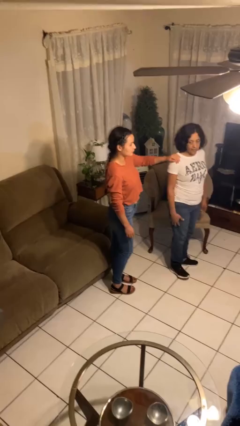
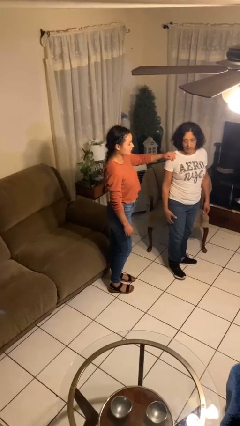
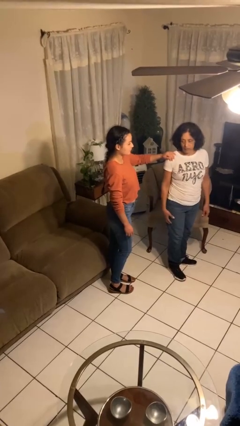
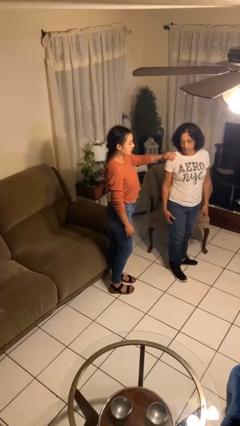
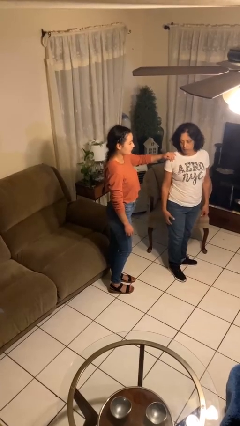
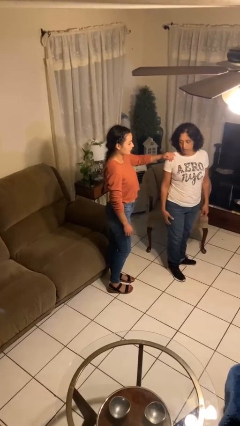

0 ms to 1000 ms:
person spins person around

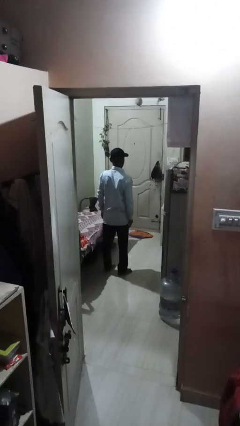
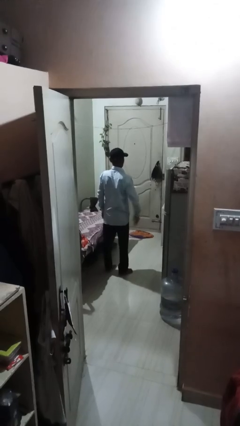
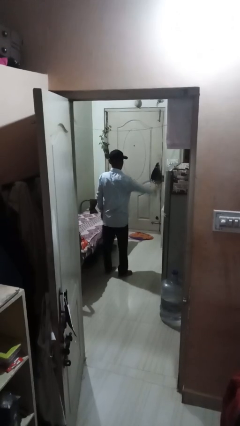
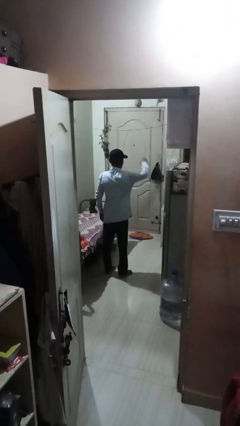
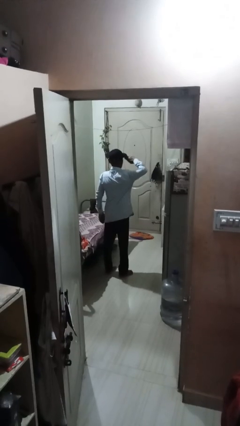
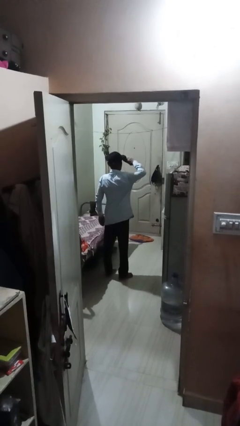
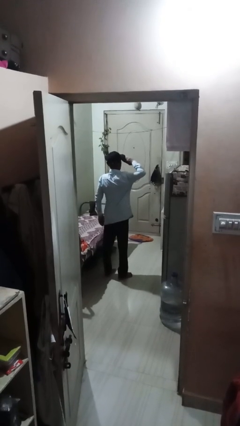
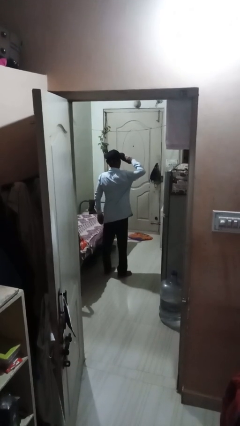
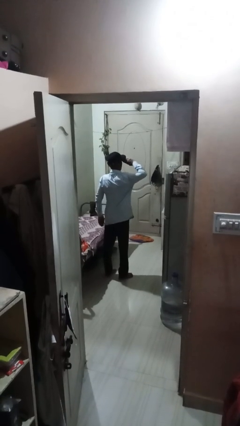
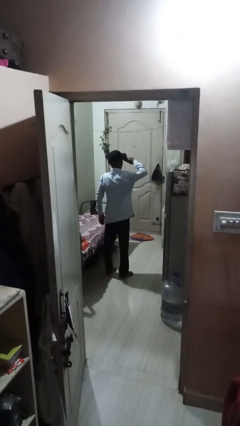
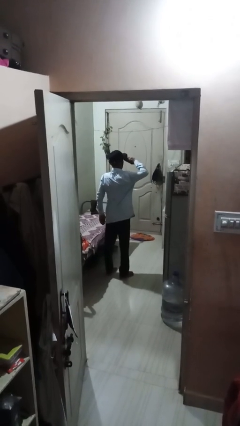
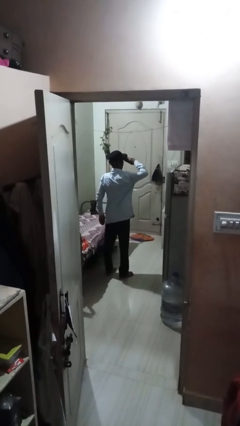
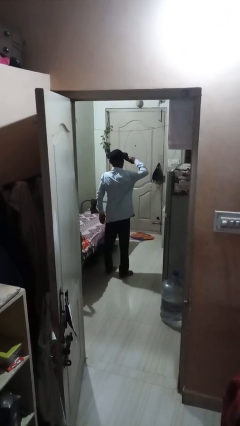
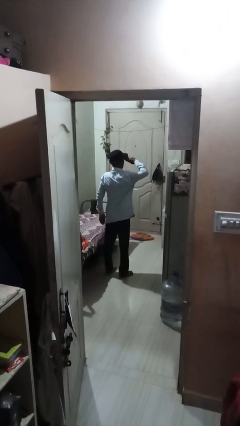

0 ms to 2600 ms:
person salutes

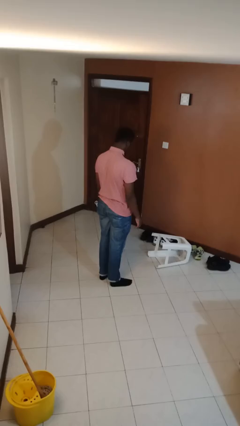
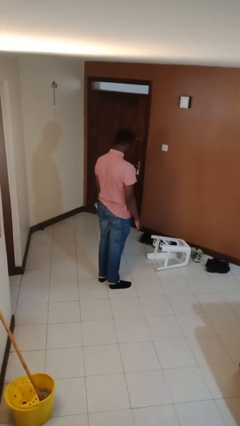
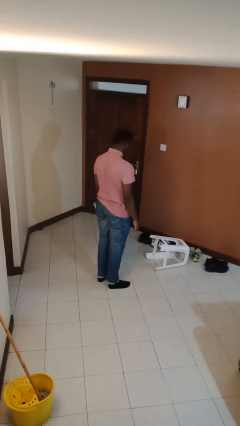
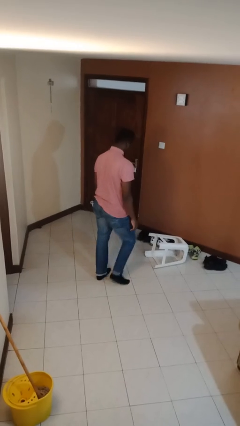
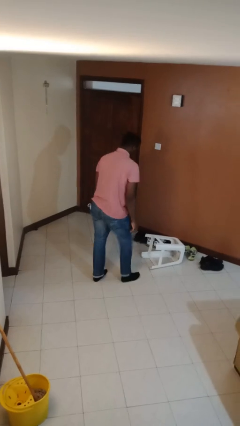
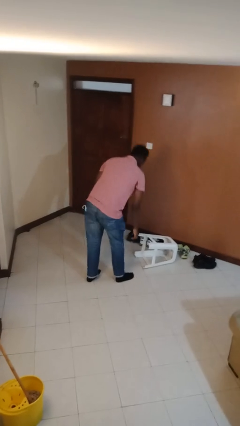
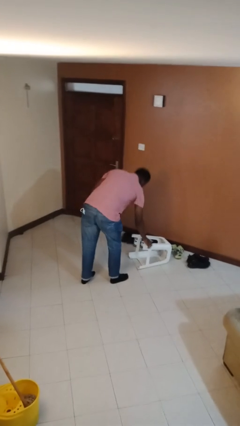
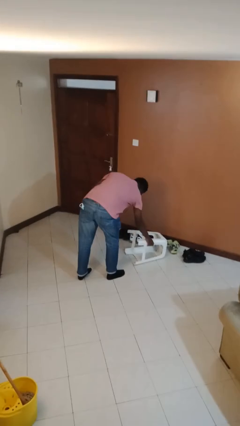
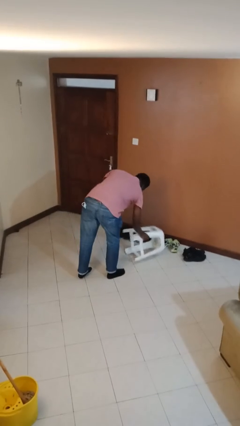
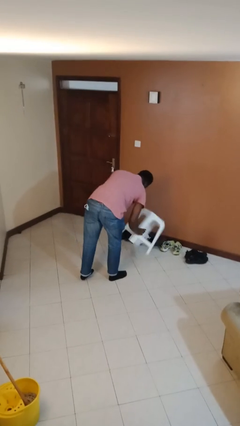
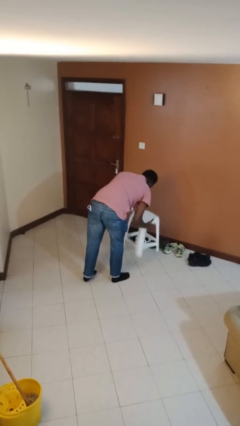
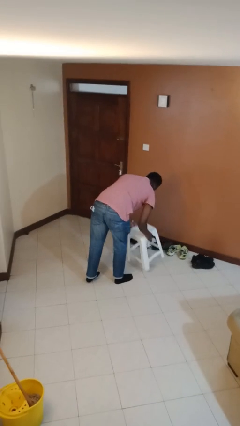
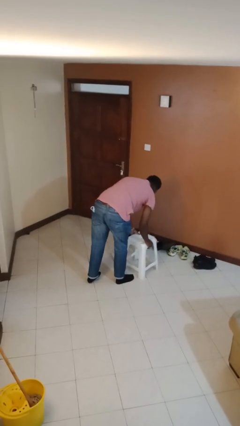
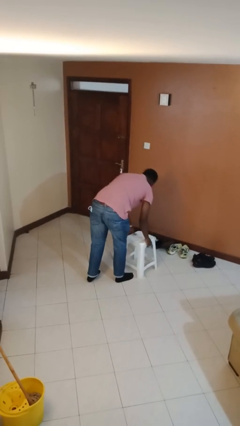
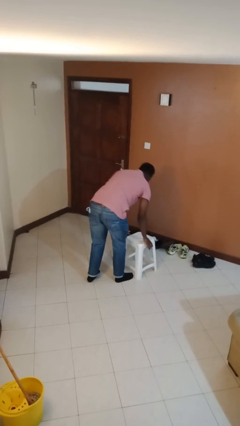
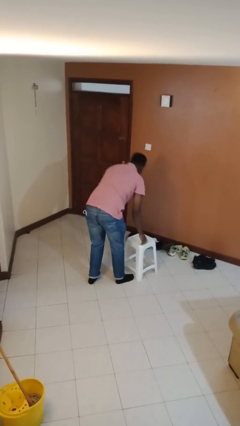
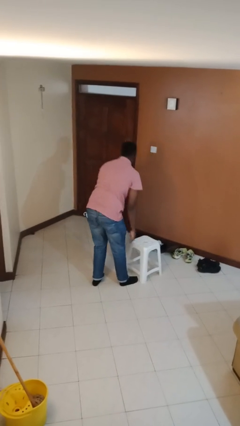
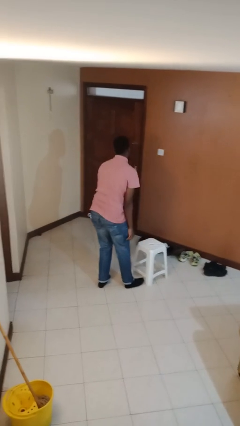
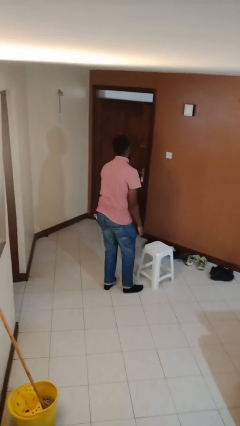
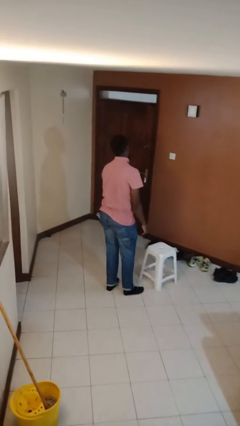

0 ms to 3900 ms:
person sets upright furniture

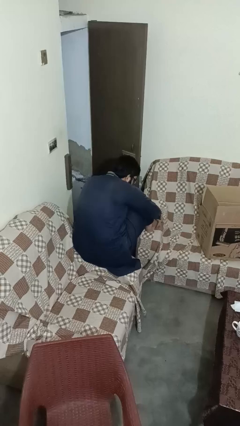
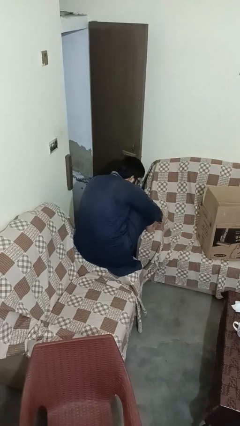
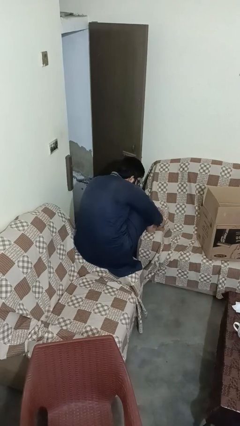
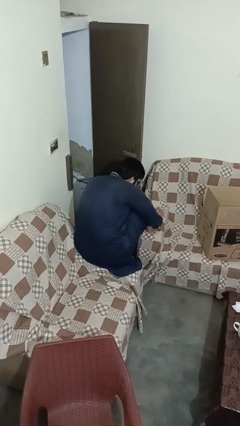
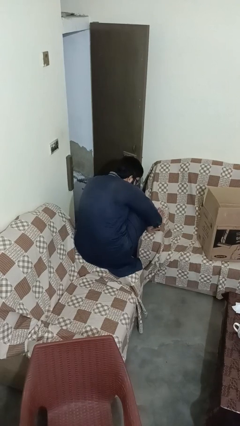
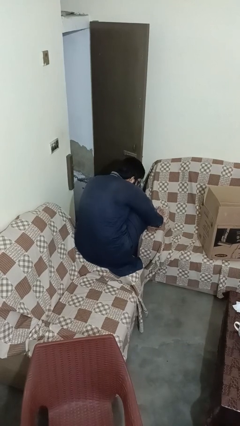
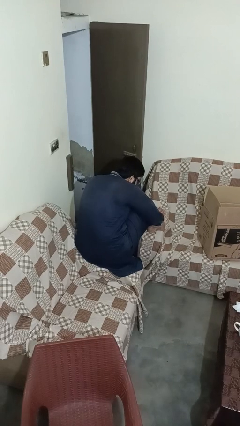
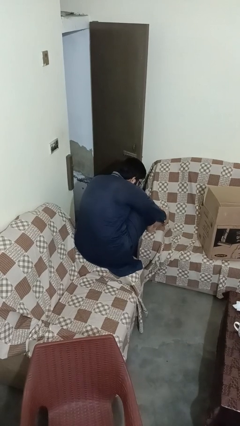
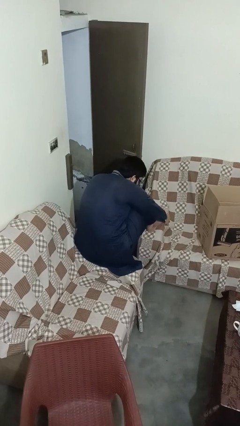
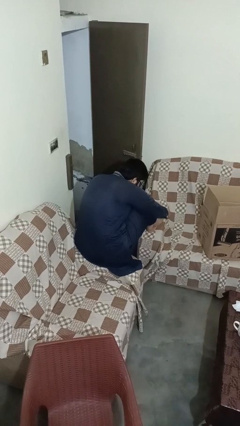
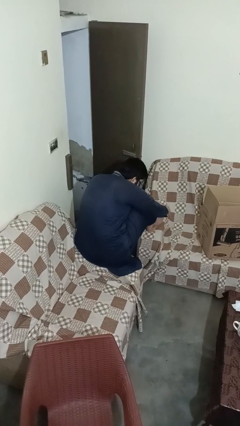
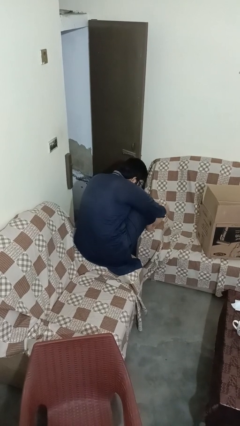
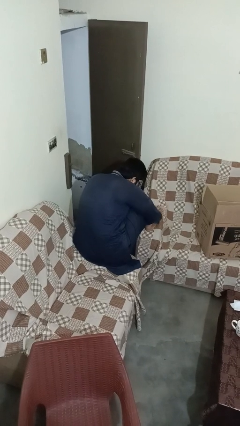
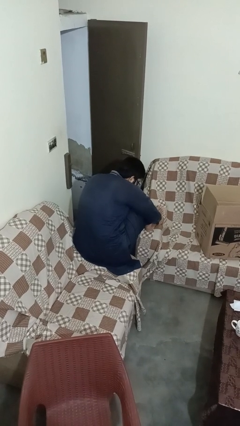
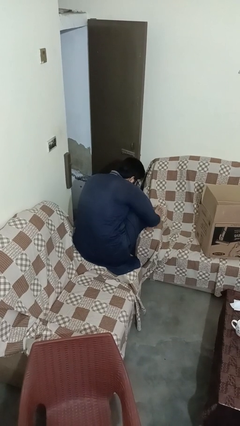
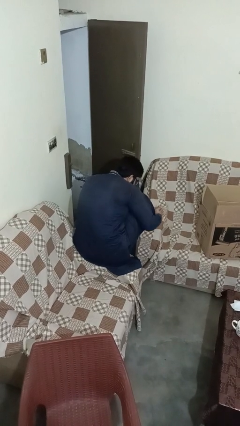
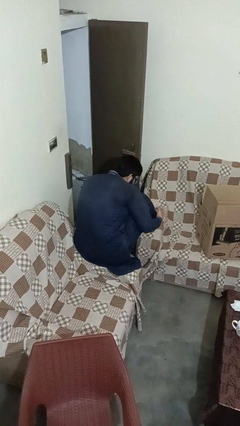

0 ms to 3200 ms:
person rubs foot

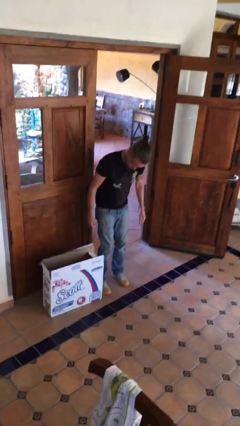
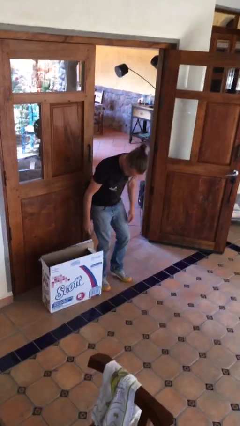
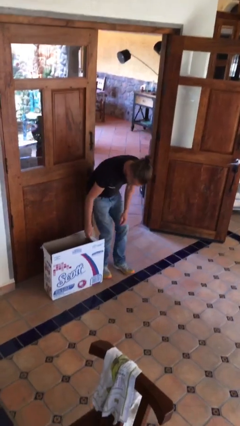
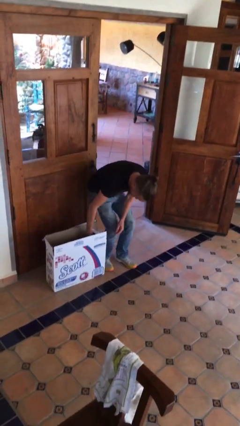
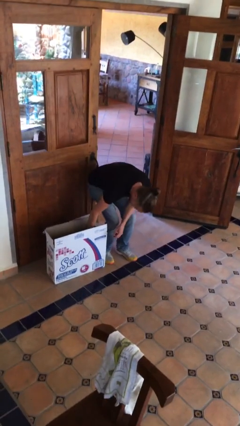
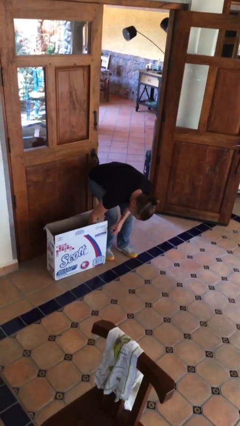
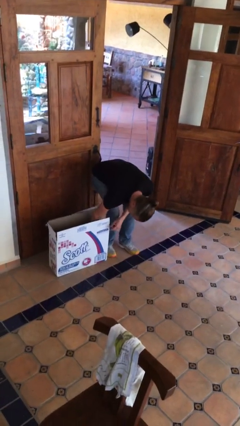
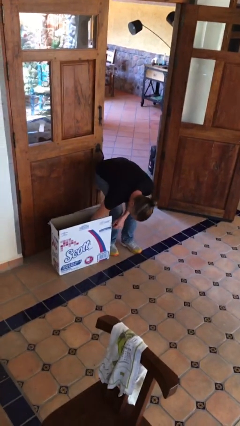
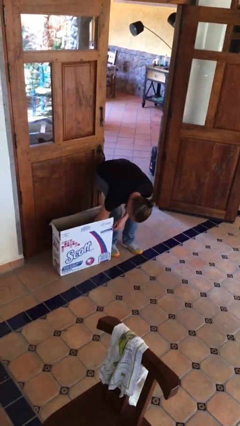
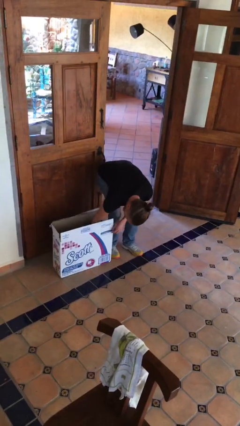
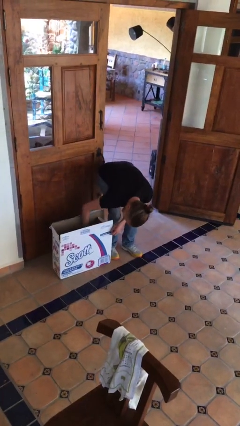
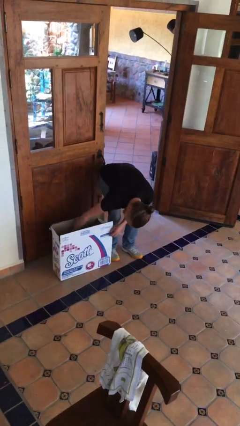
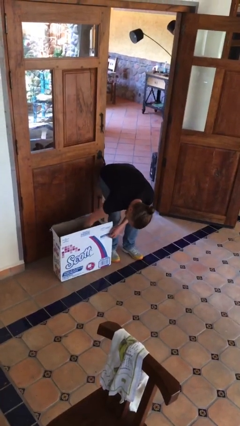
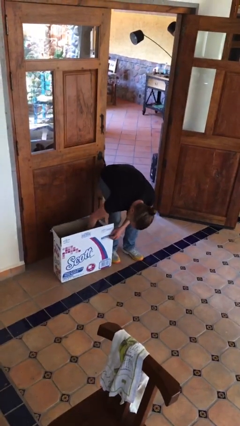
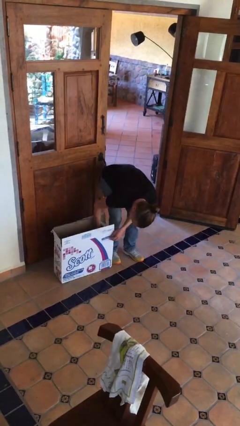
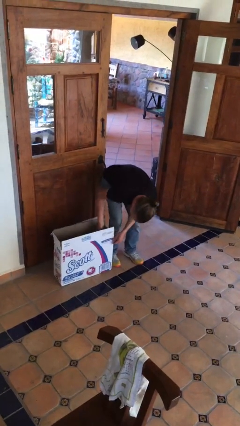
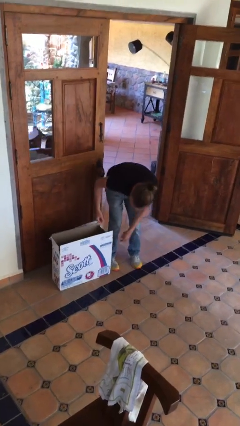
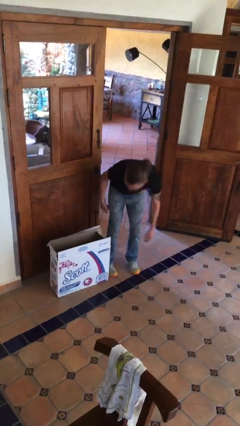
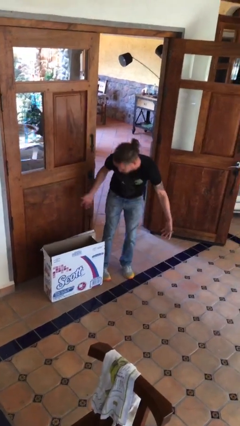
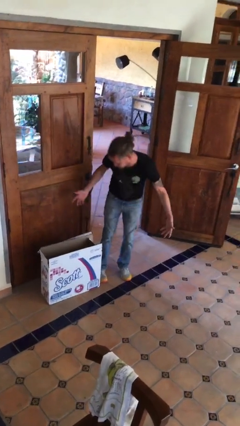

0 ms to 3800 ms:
person searches in box

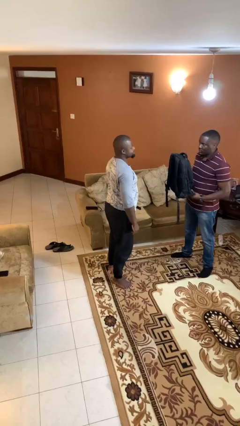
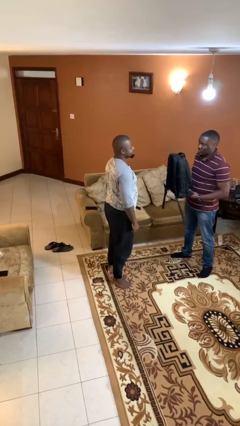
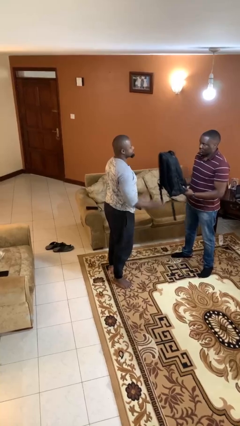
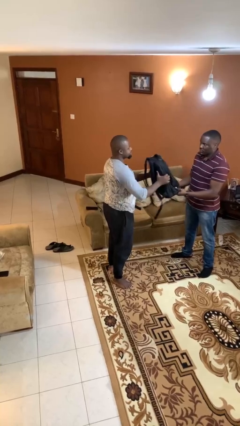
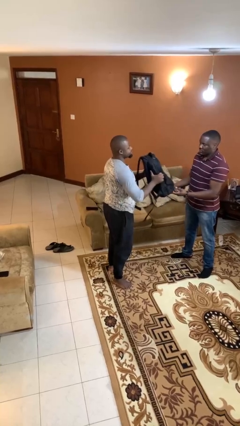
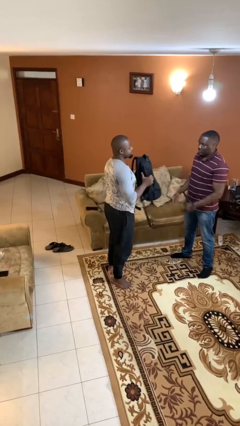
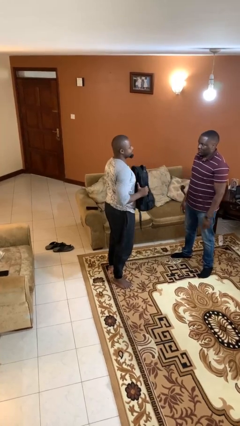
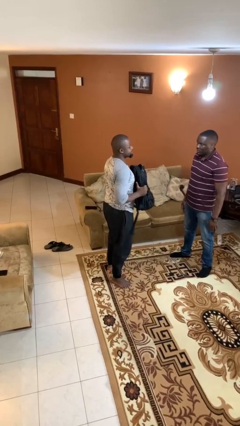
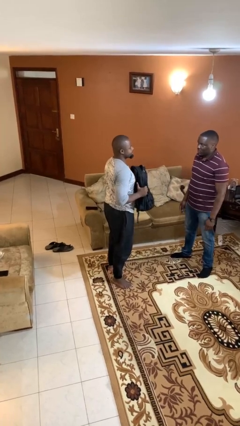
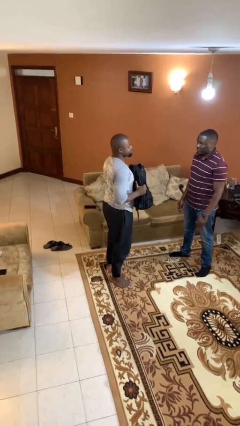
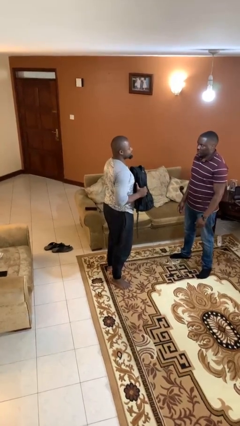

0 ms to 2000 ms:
person transfers object to person

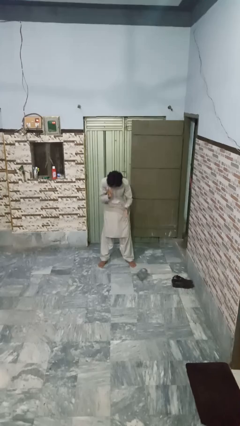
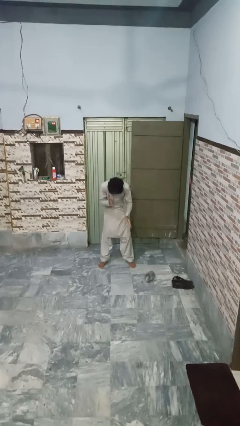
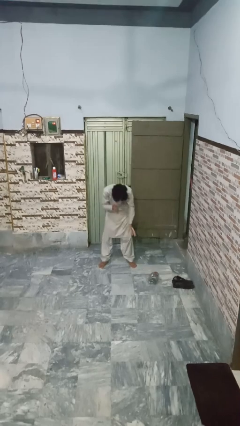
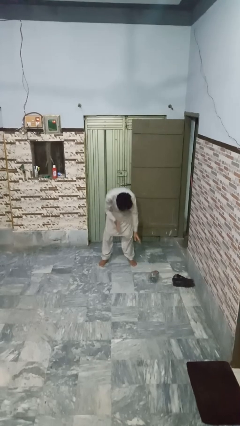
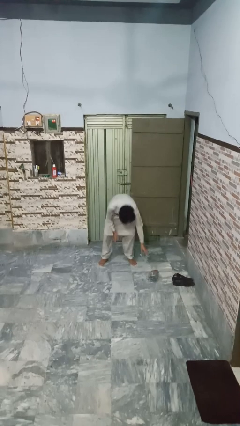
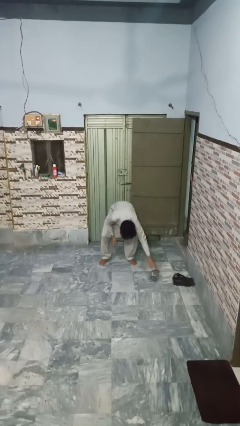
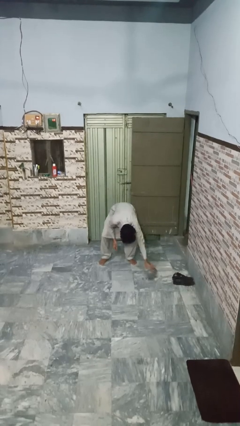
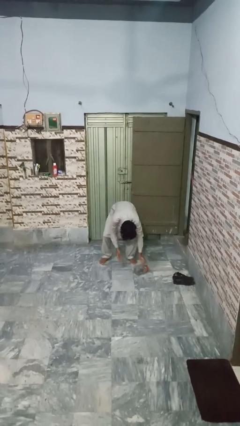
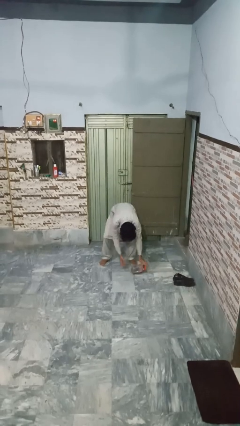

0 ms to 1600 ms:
person catches dropped object
